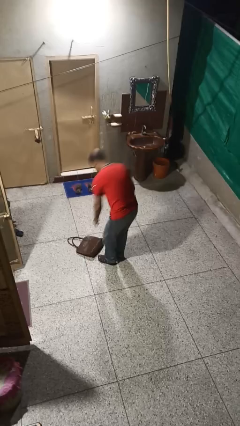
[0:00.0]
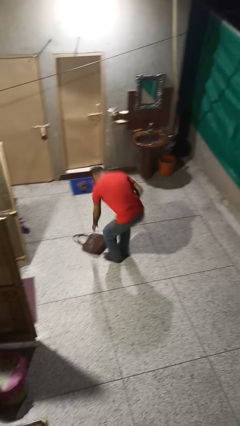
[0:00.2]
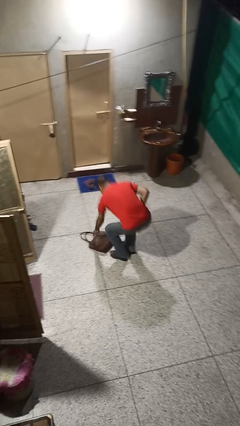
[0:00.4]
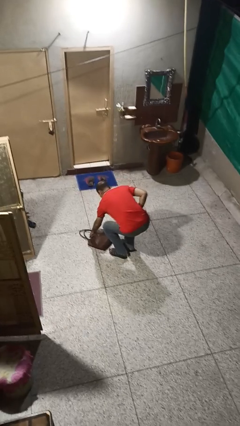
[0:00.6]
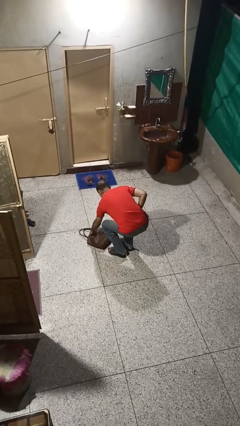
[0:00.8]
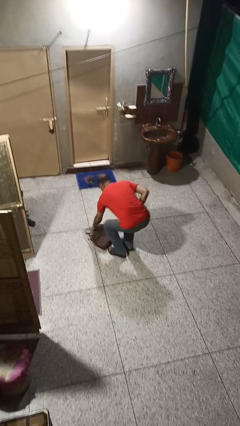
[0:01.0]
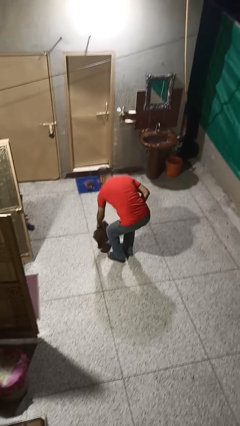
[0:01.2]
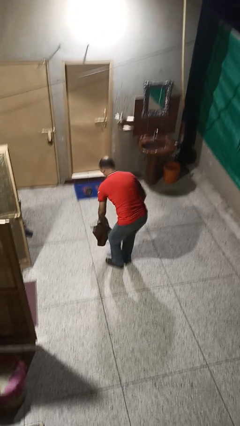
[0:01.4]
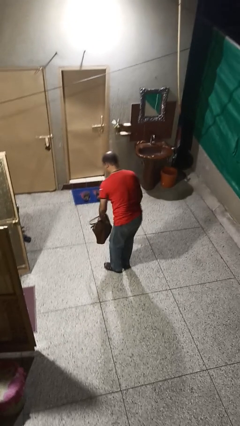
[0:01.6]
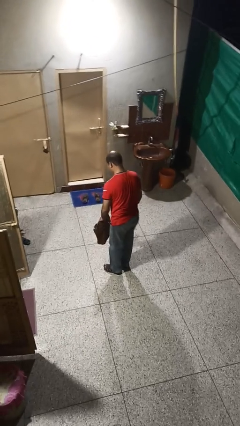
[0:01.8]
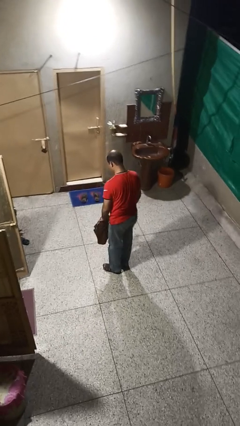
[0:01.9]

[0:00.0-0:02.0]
person picks up object from floor
